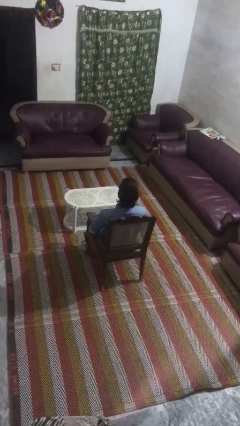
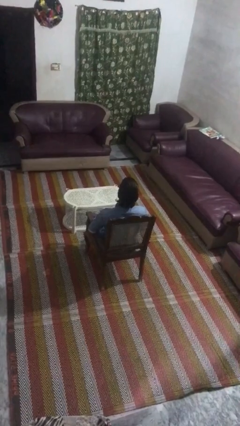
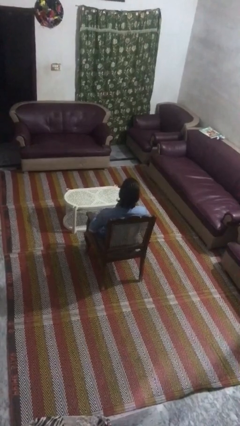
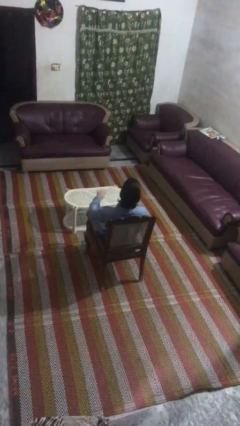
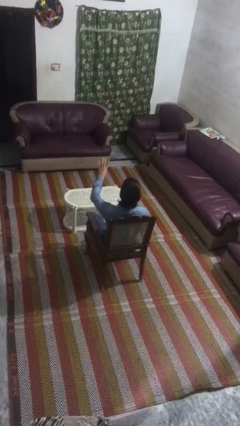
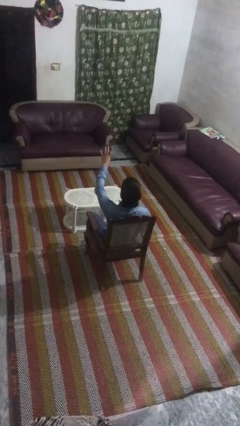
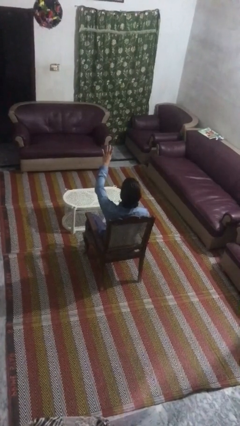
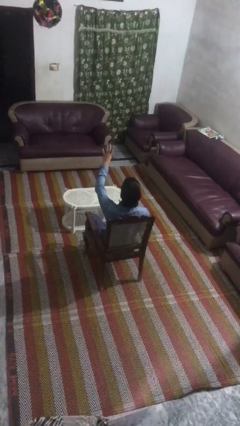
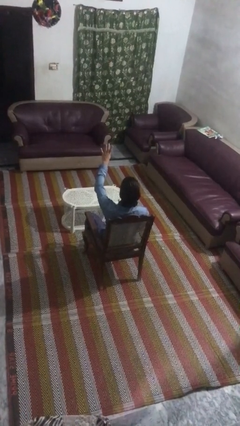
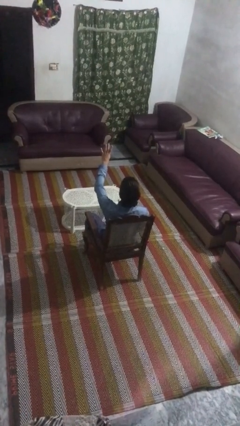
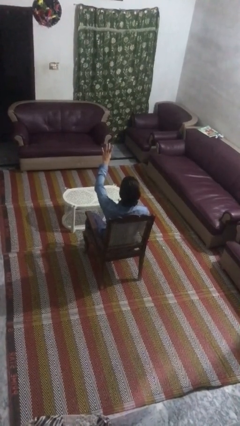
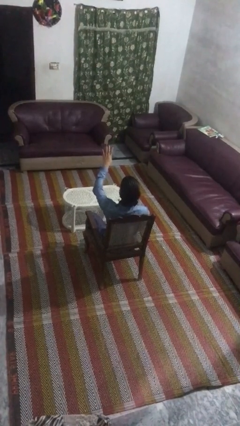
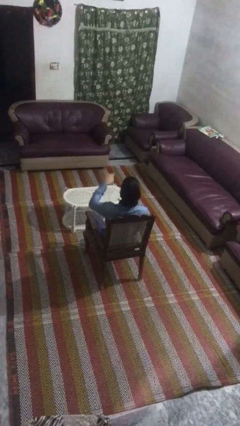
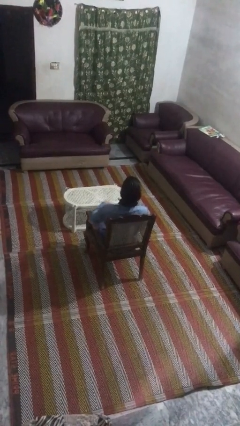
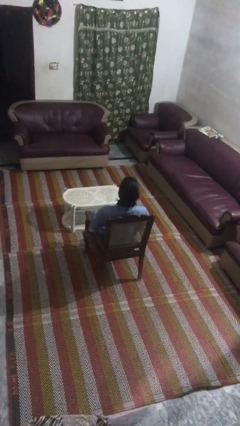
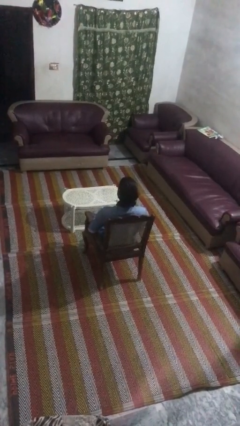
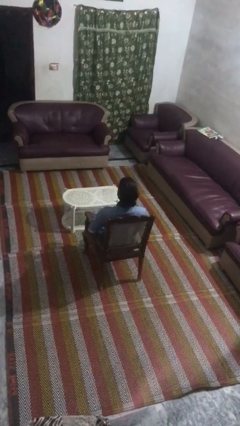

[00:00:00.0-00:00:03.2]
person gestures number four

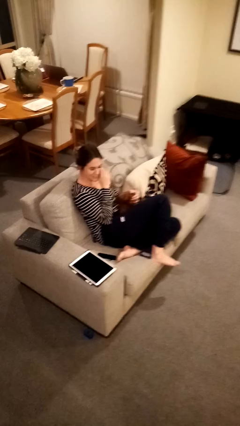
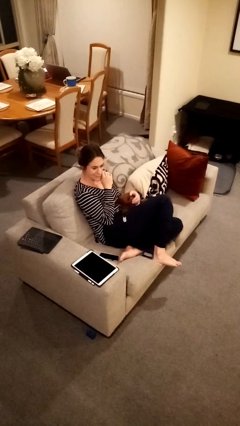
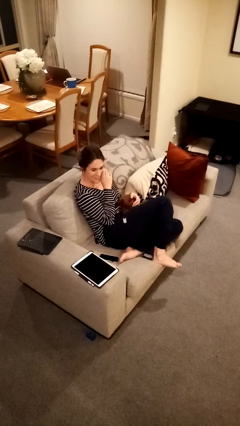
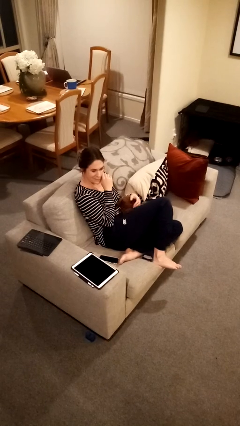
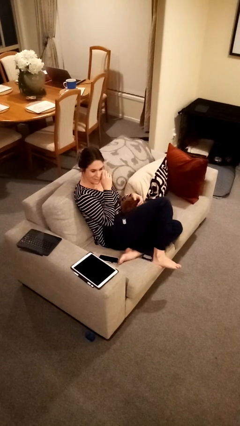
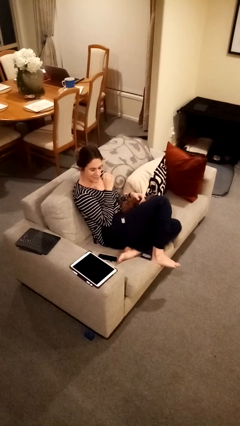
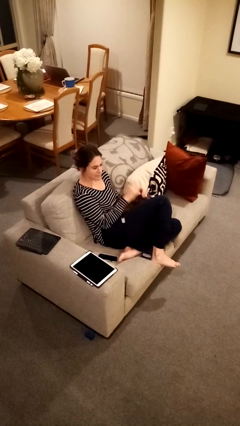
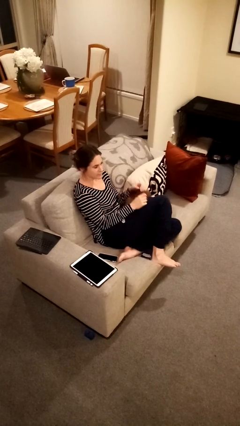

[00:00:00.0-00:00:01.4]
person scratches face

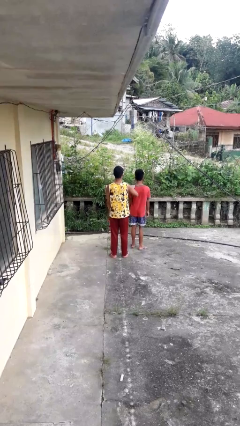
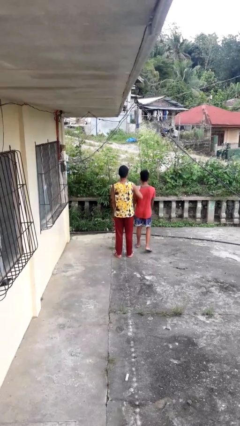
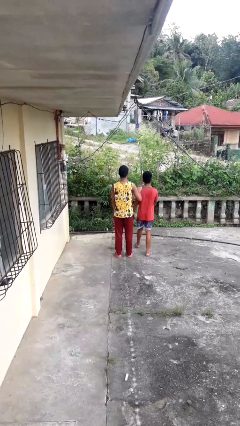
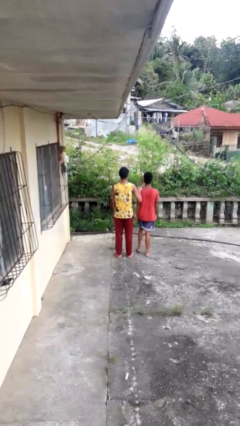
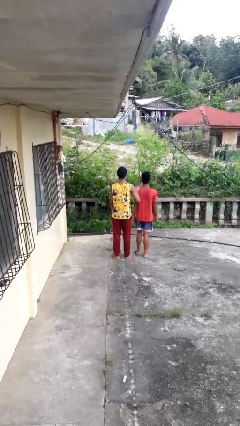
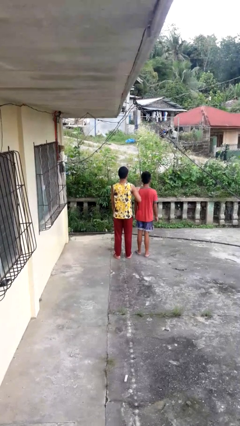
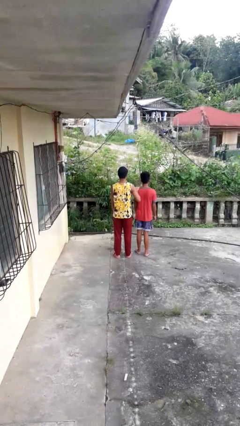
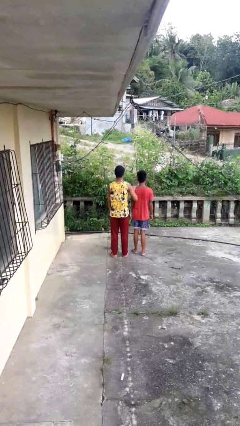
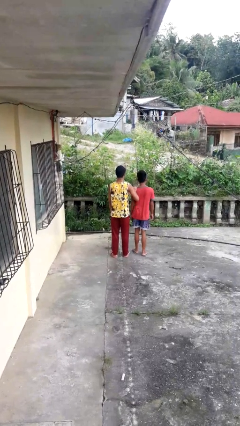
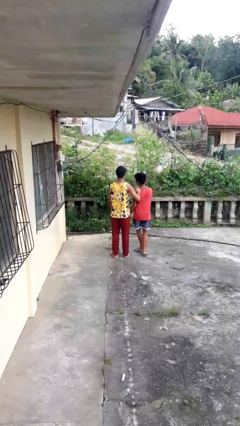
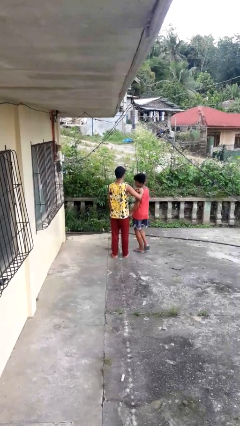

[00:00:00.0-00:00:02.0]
person grabs person by shoulder

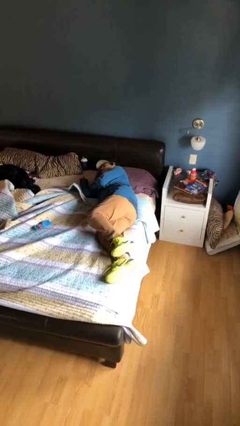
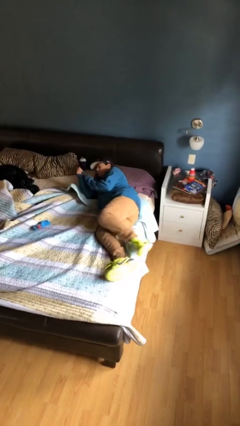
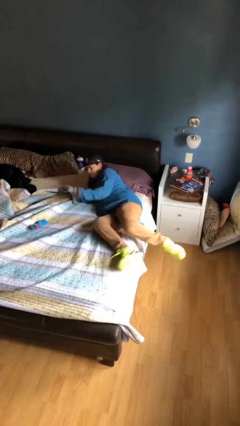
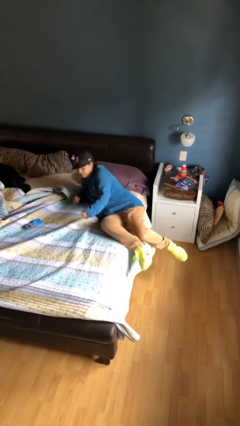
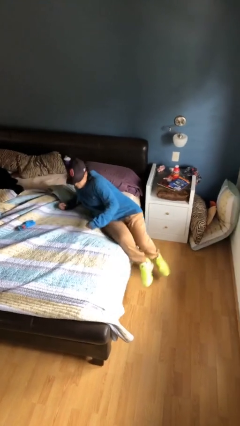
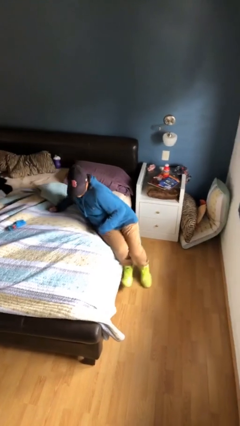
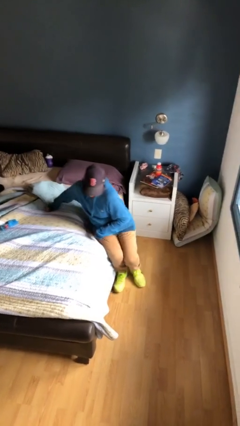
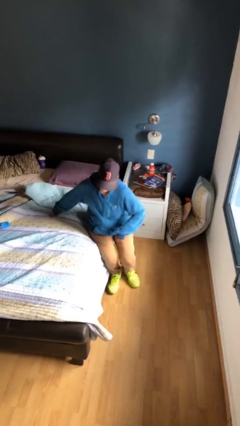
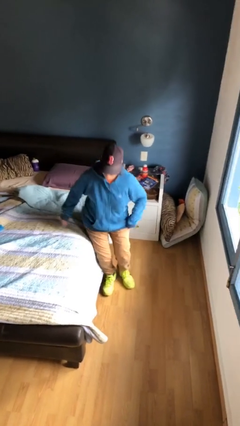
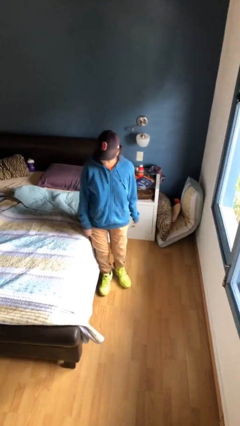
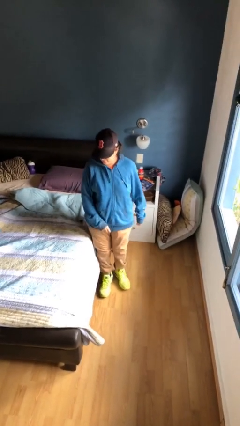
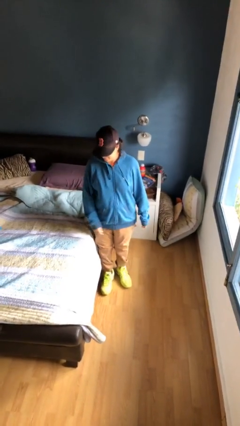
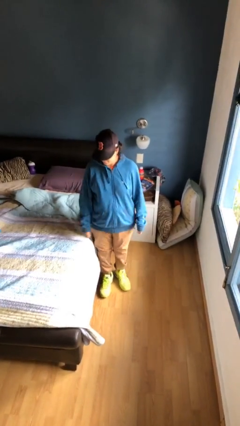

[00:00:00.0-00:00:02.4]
person stands up

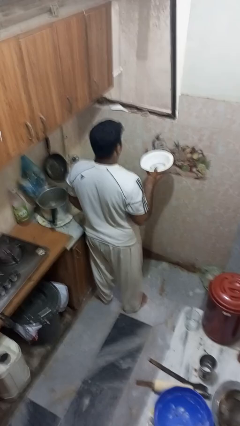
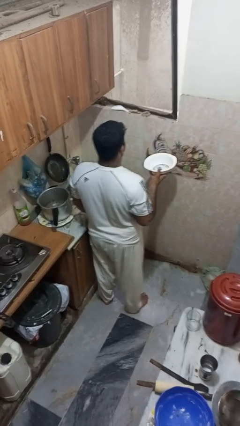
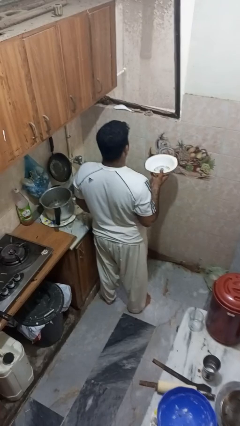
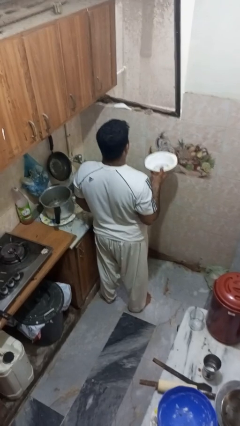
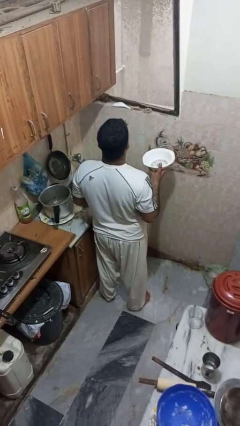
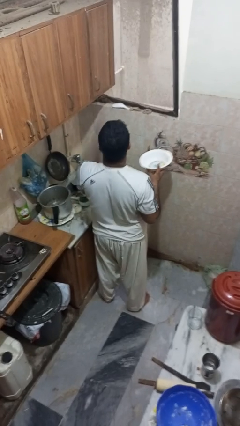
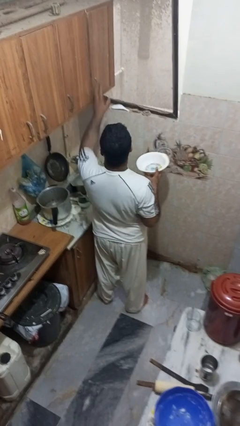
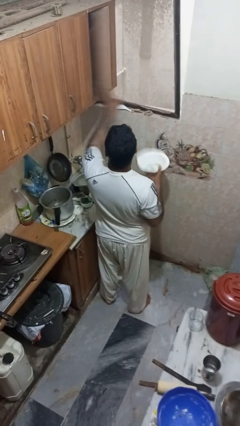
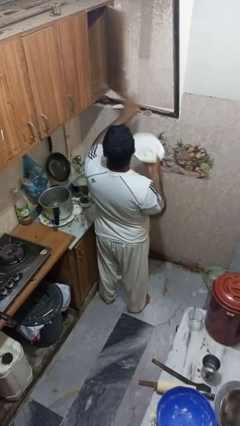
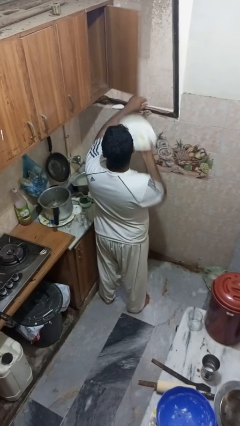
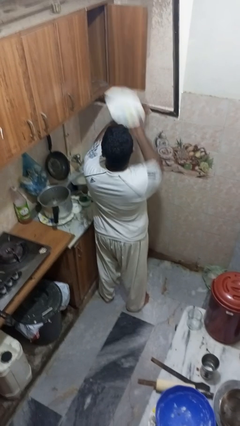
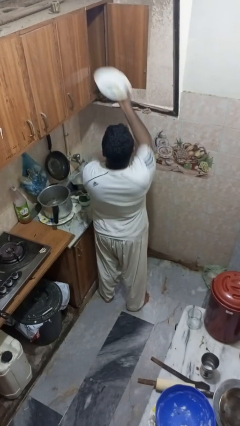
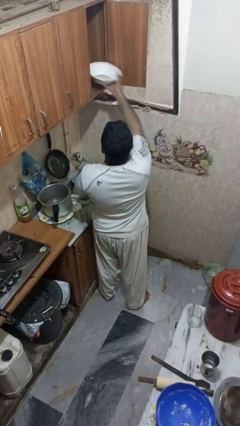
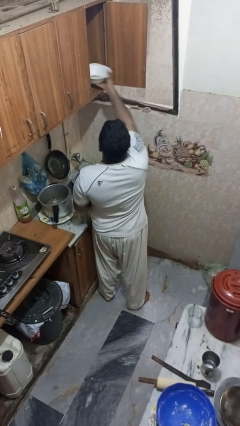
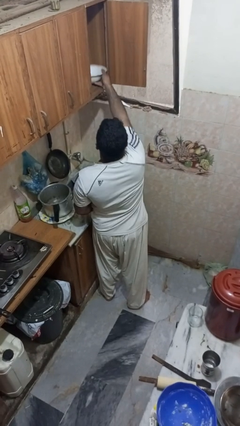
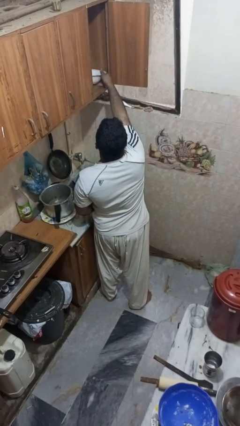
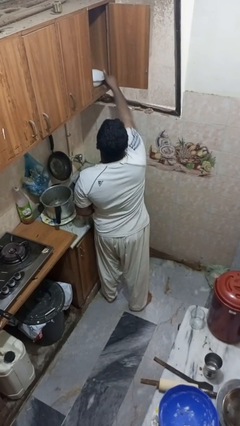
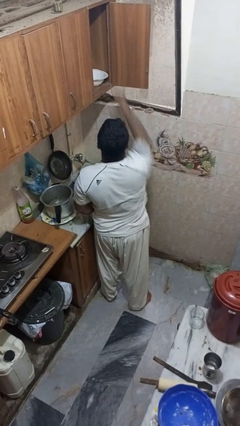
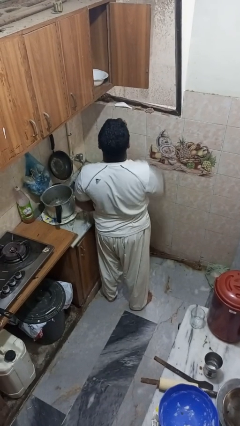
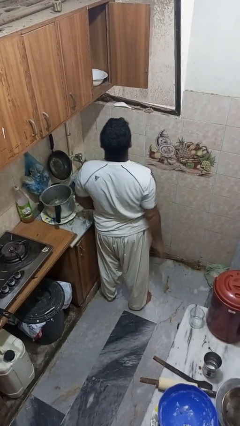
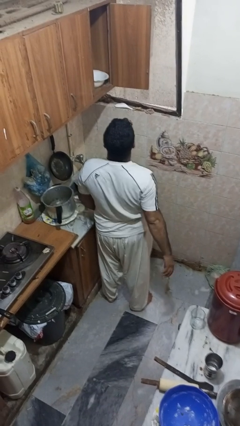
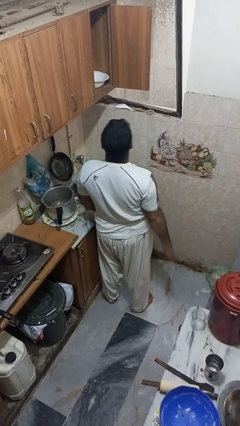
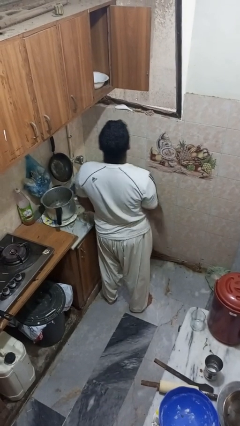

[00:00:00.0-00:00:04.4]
person puts object in cabinet

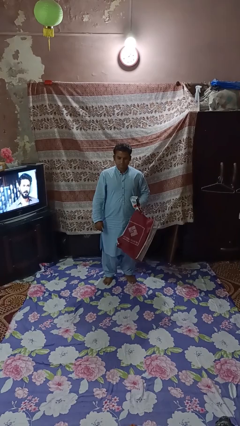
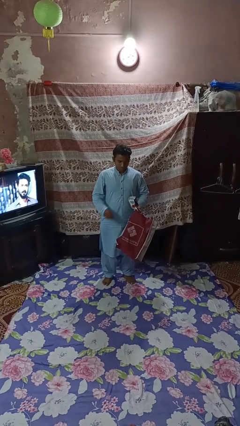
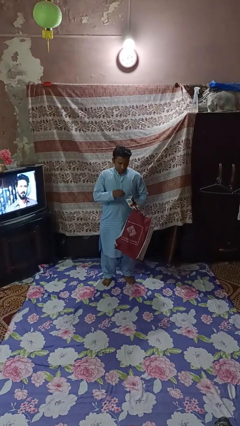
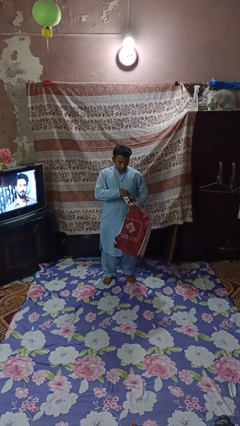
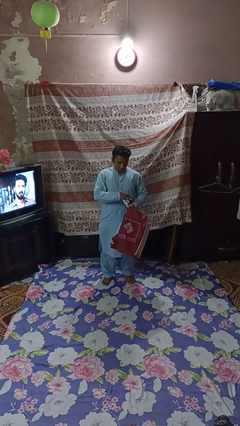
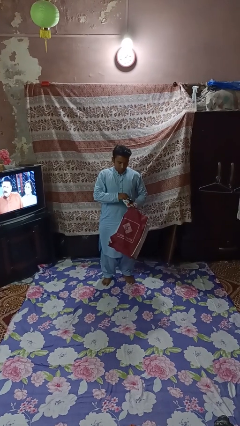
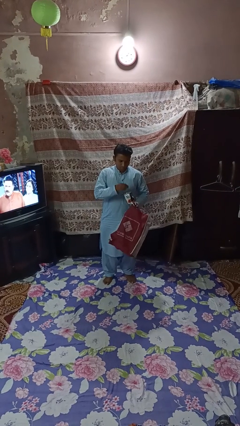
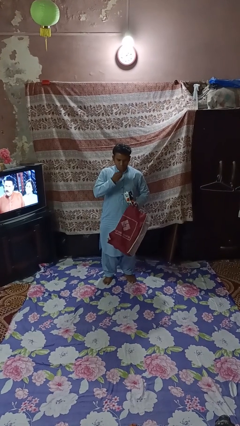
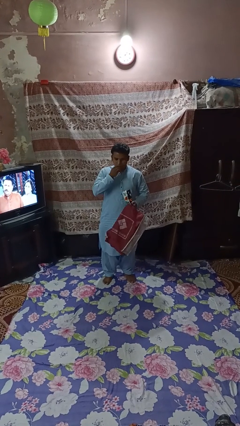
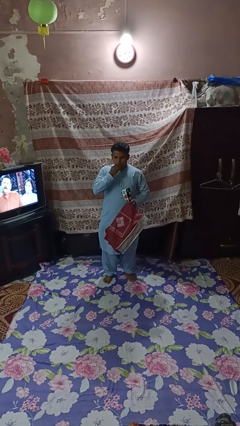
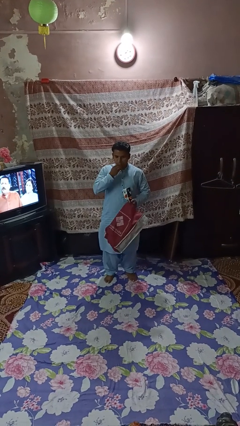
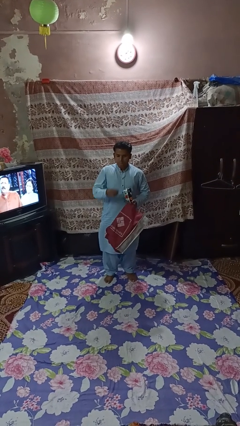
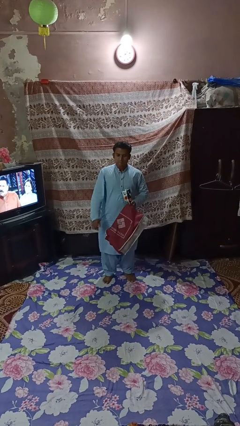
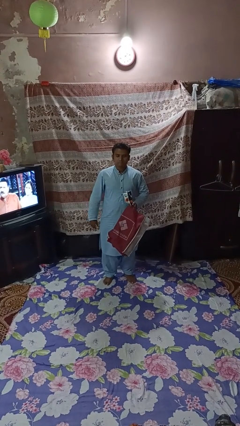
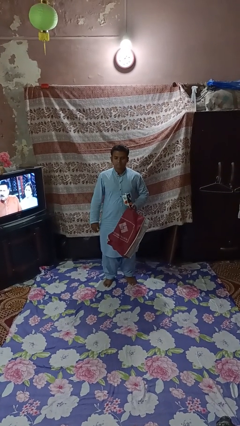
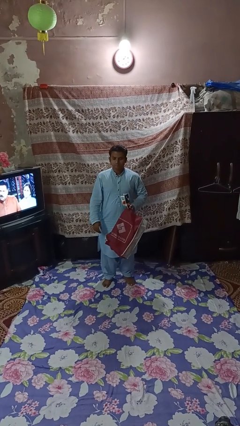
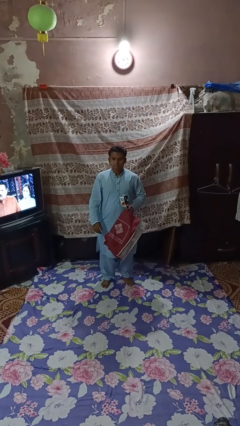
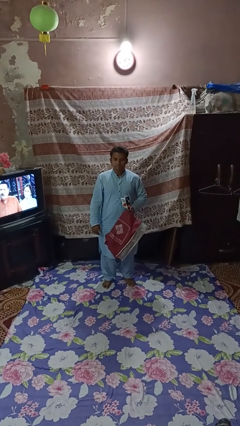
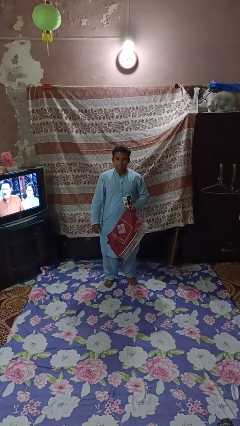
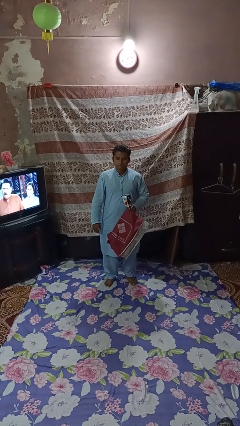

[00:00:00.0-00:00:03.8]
person eats snack from bag
